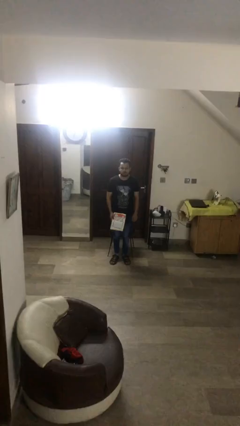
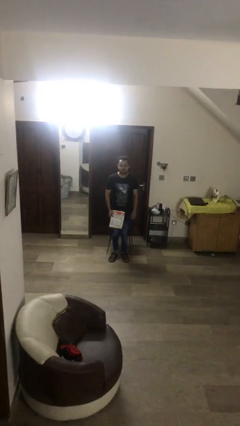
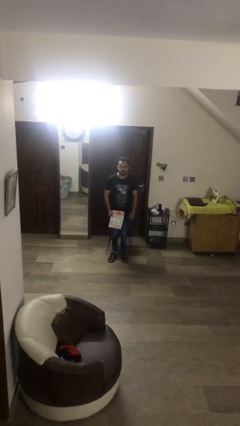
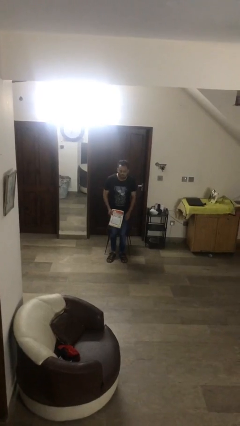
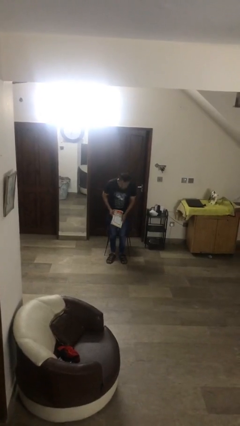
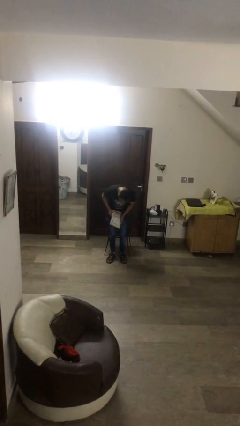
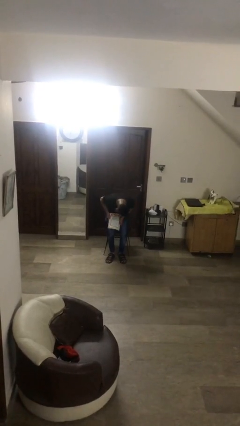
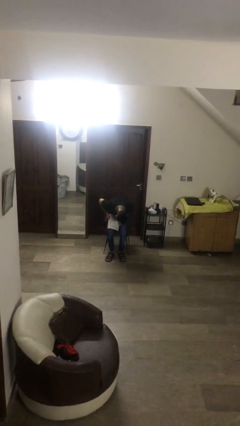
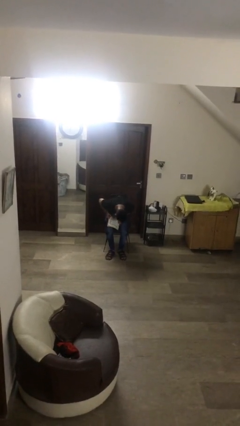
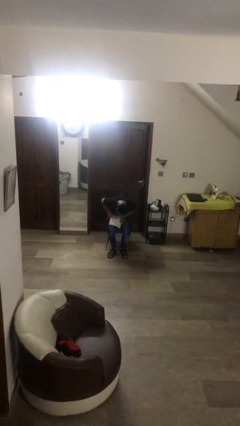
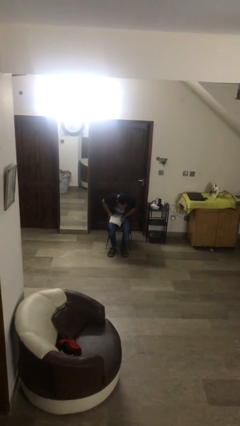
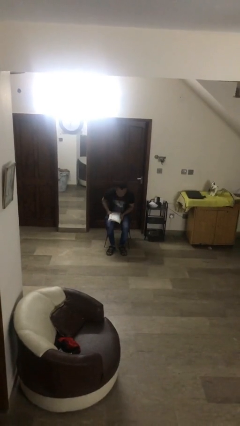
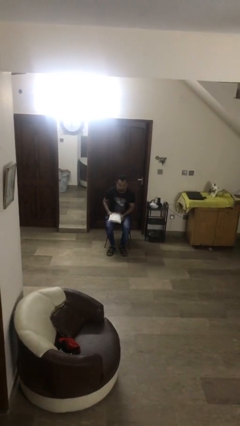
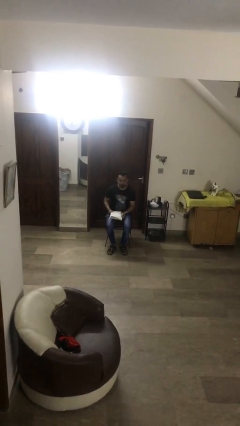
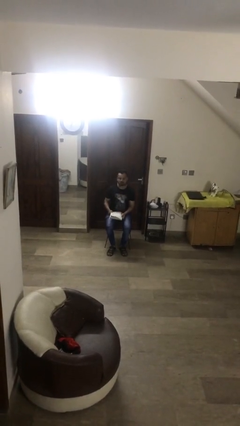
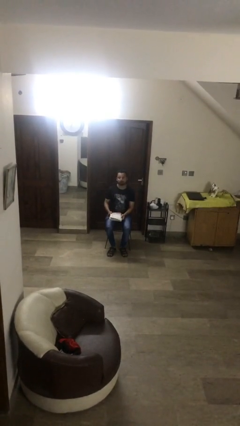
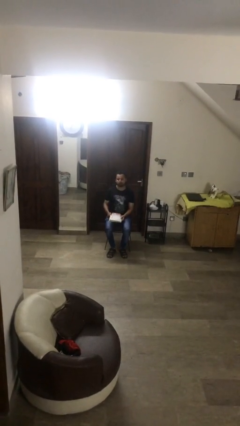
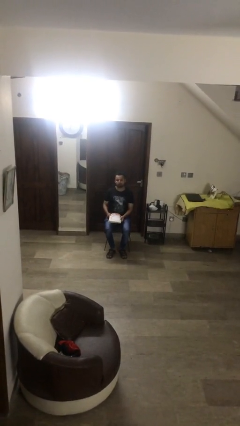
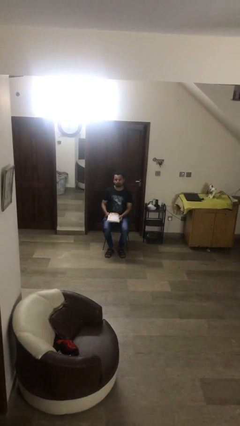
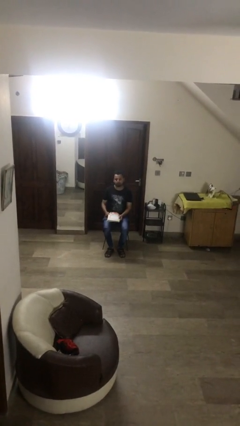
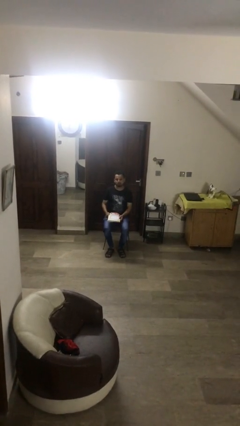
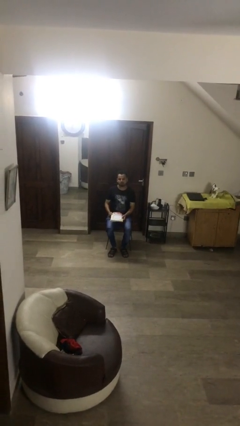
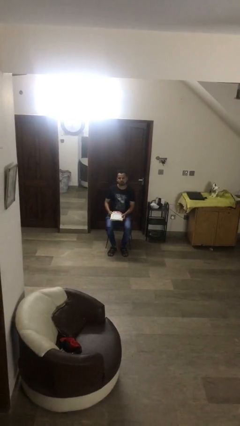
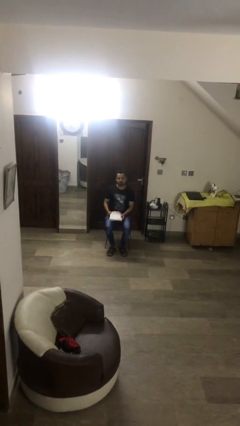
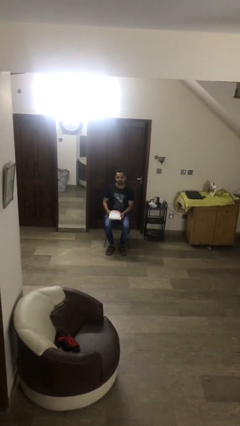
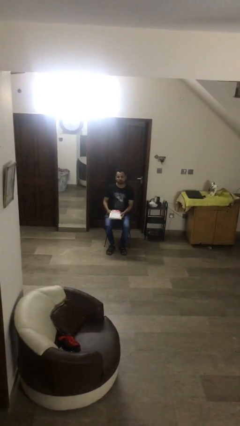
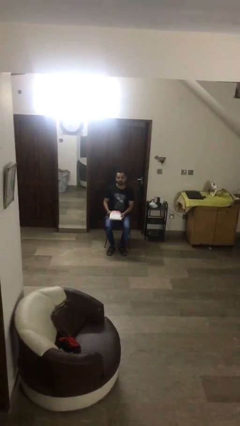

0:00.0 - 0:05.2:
person sits down

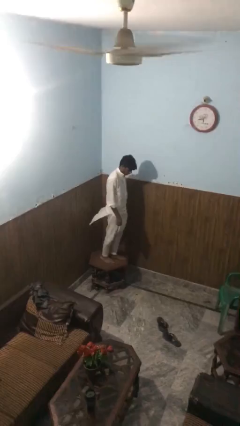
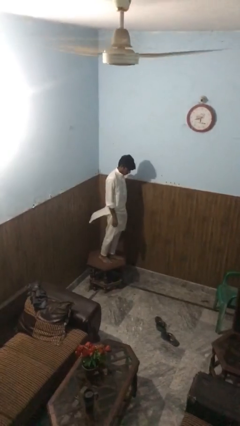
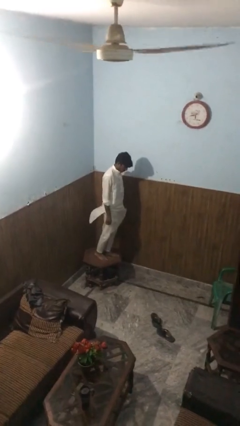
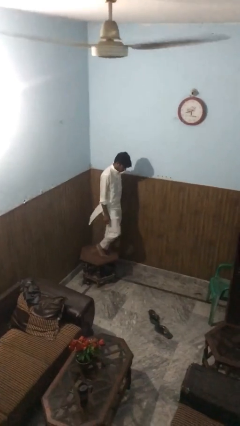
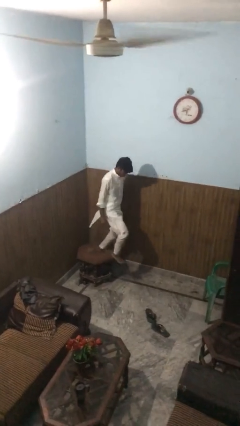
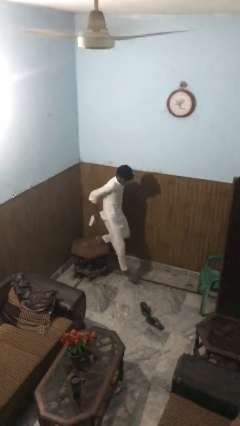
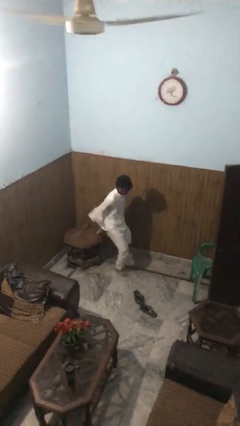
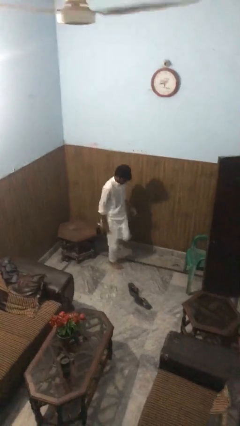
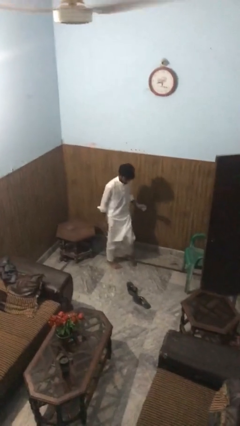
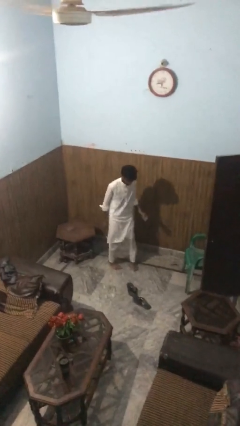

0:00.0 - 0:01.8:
person climbs off table

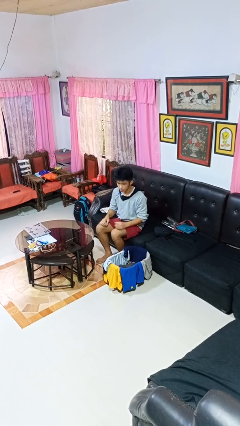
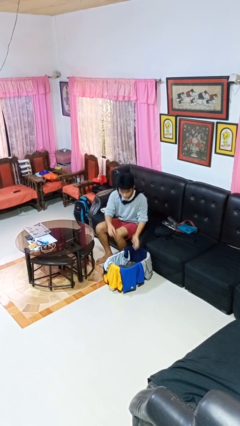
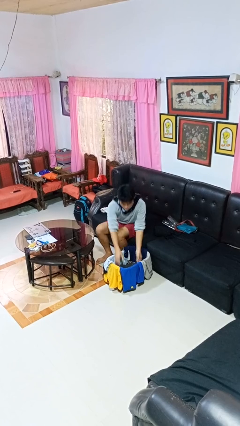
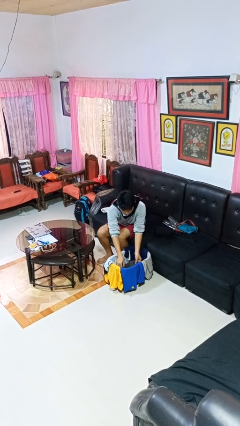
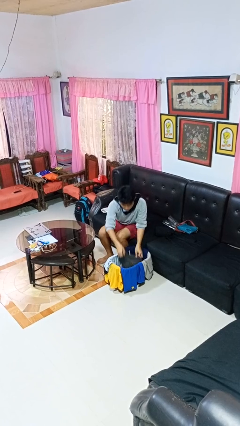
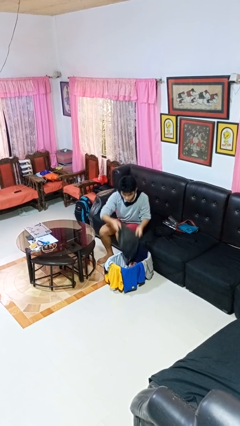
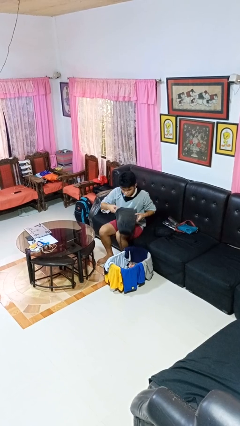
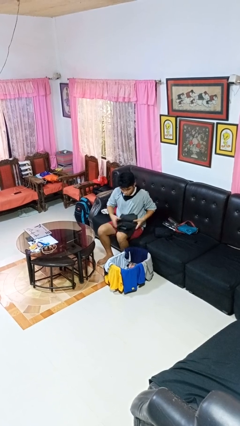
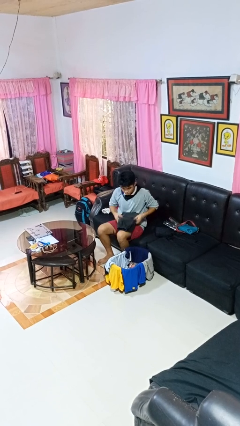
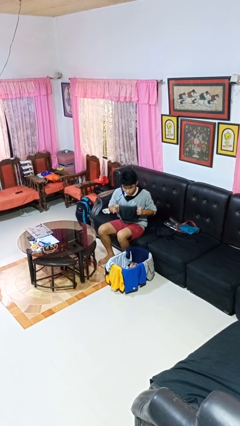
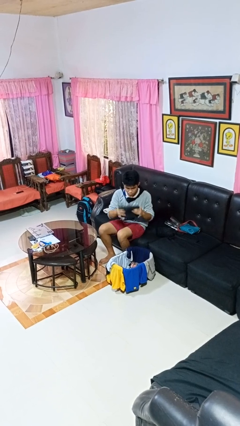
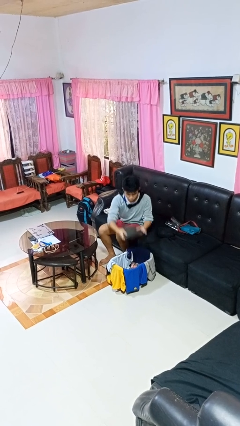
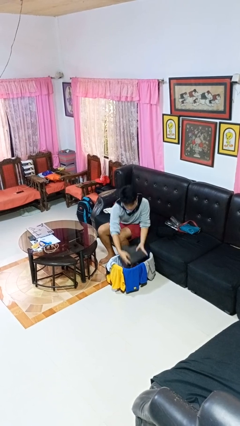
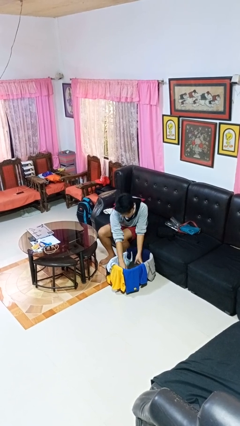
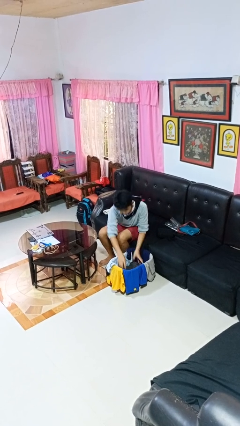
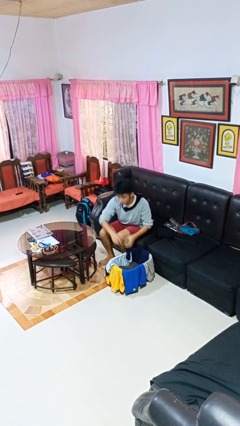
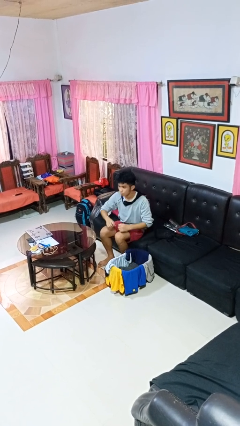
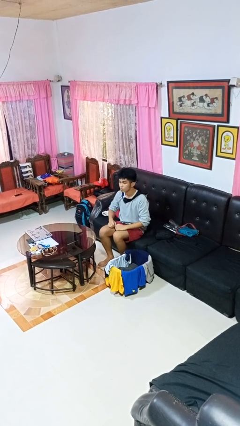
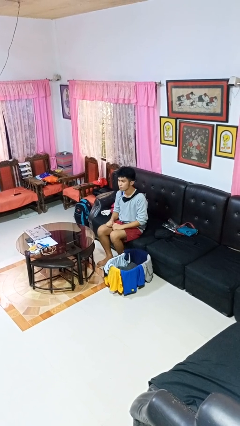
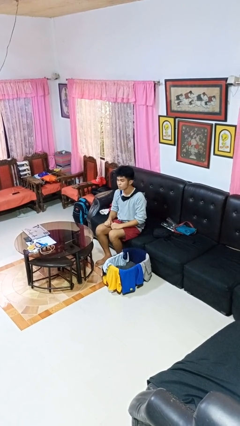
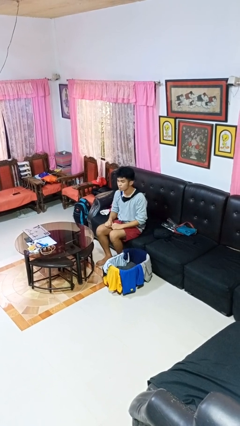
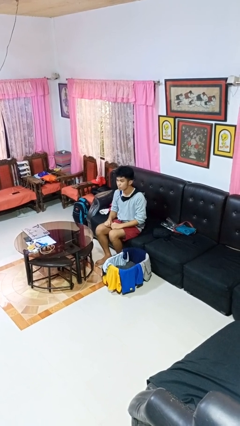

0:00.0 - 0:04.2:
person folds pants

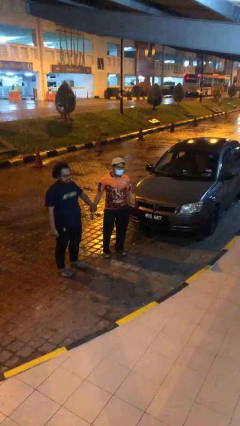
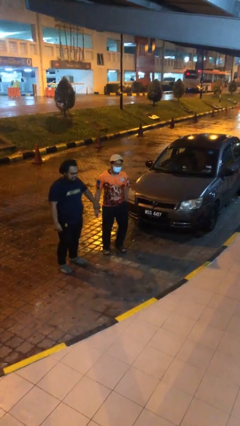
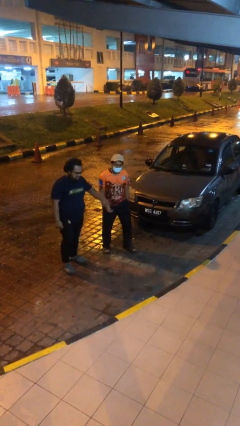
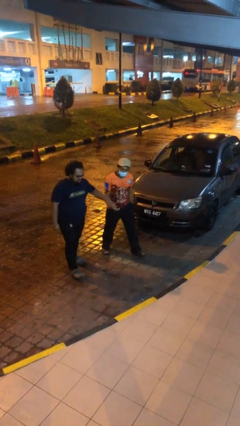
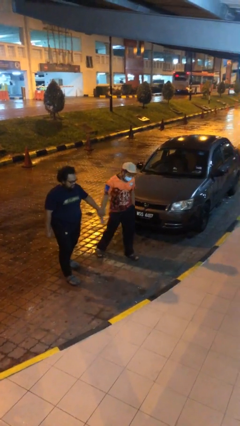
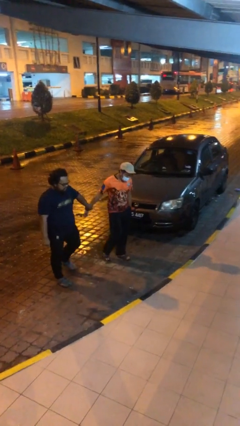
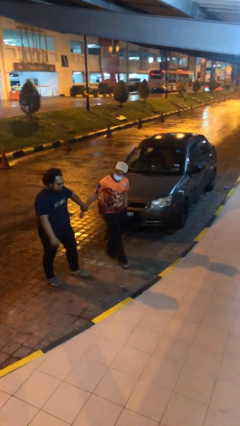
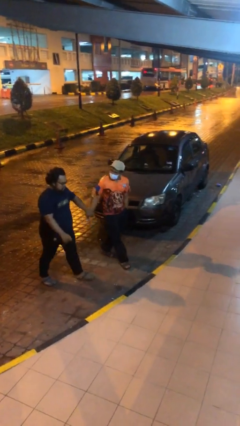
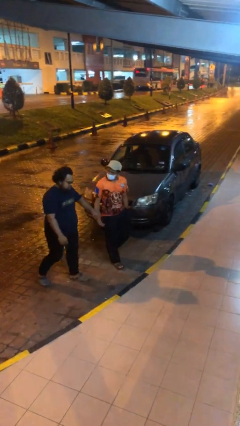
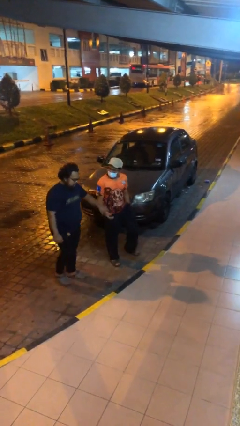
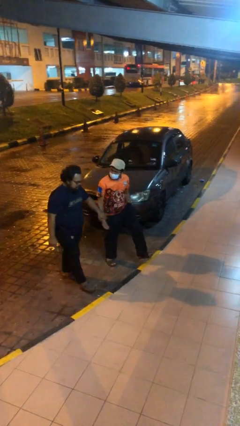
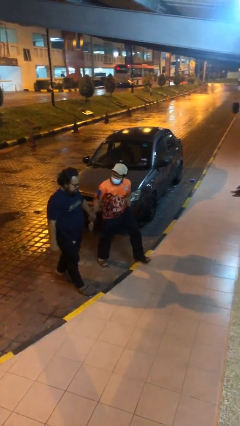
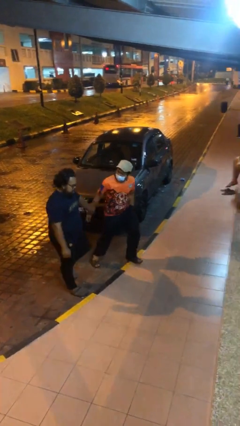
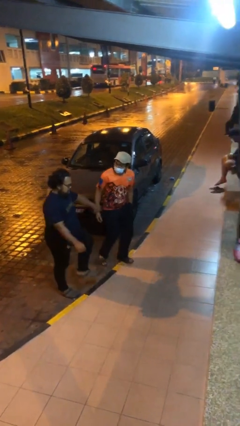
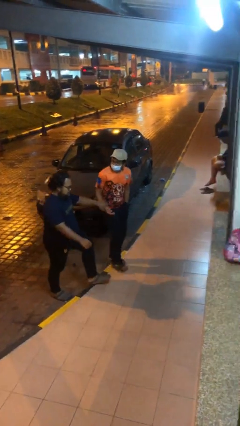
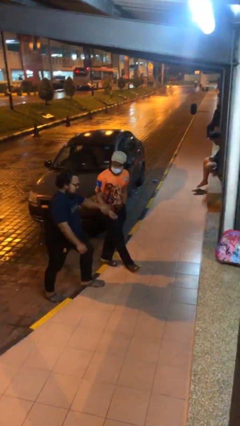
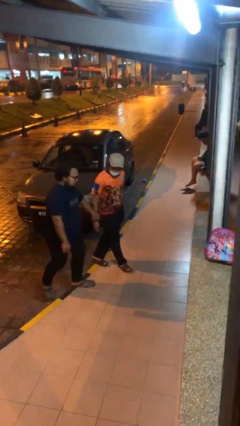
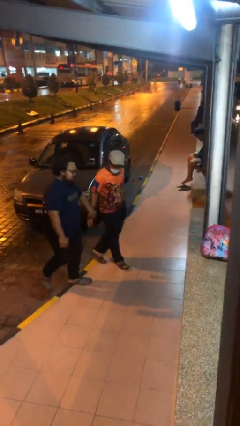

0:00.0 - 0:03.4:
person holds hand

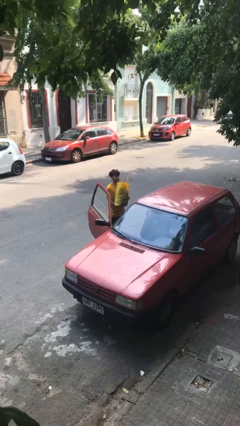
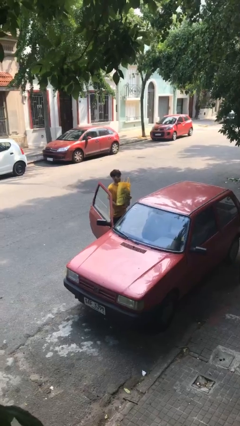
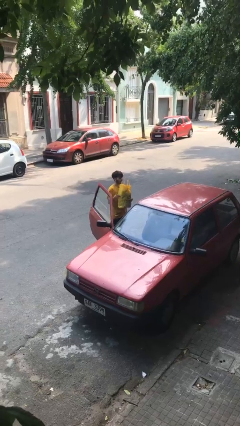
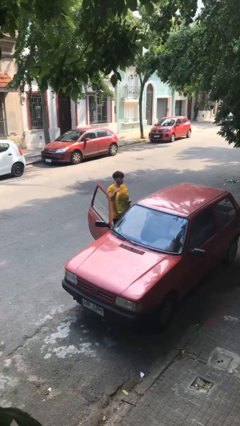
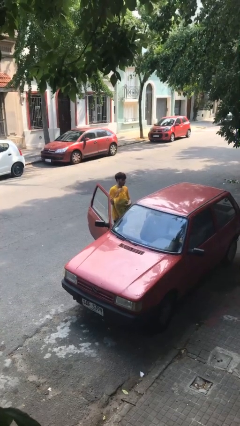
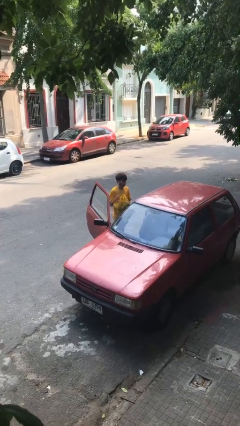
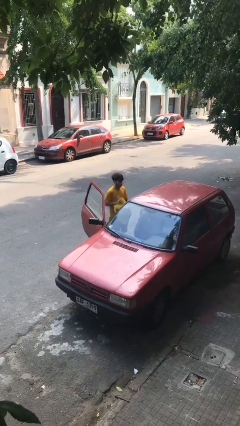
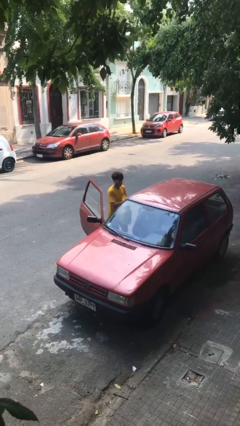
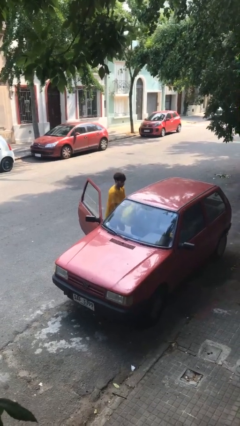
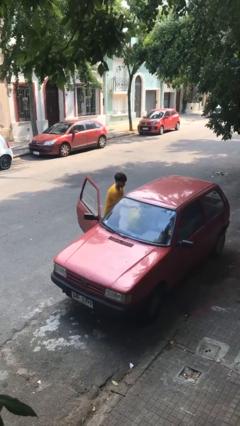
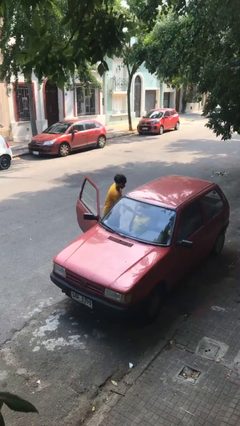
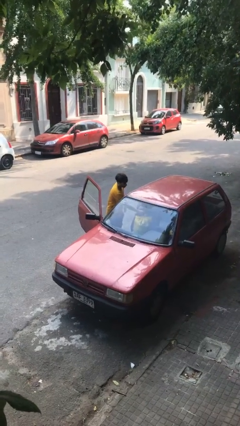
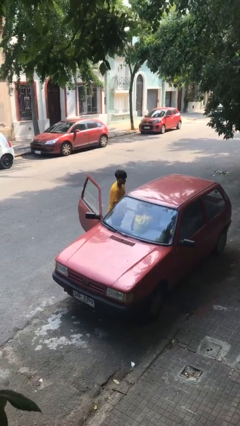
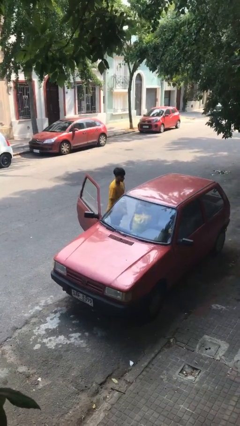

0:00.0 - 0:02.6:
person loads car

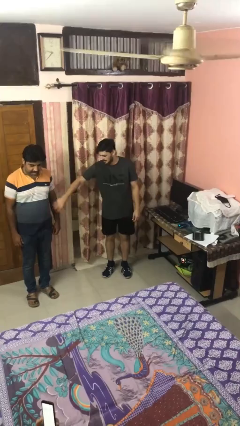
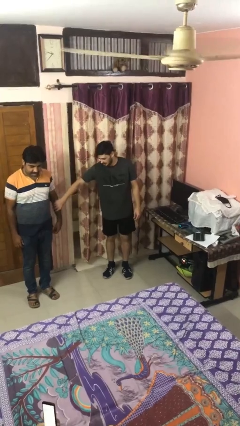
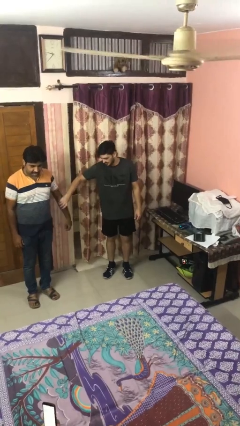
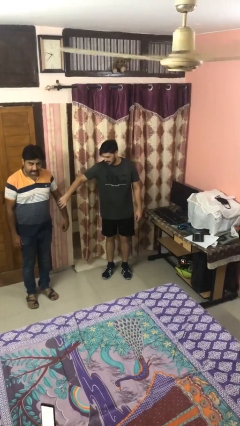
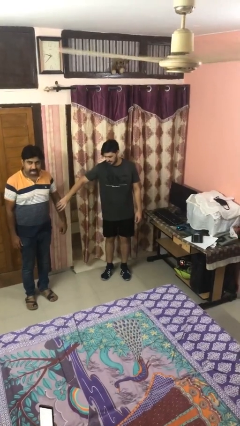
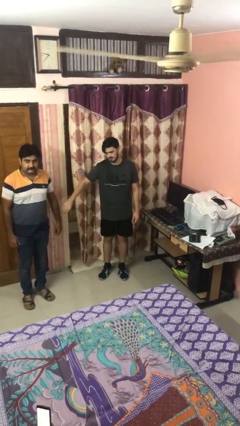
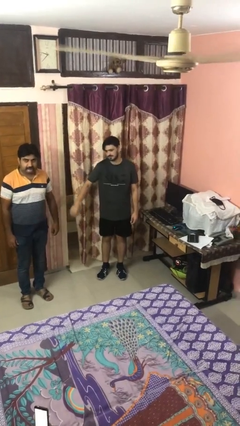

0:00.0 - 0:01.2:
person grabs person by forearm
